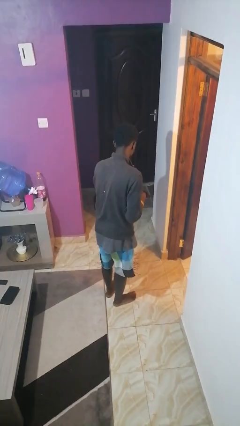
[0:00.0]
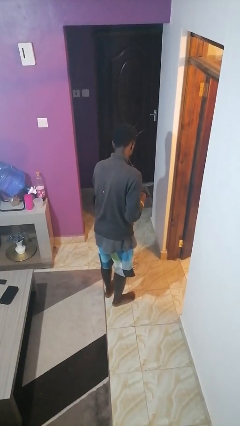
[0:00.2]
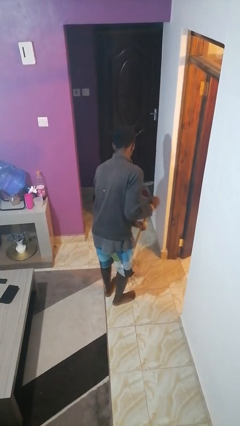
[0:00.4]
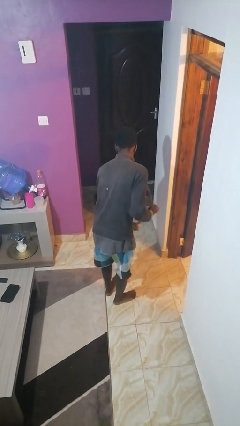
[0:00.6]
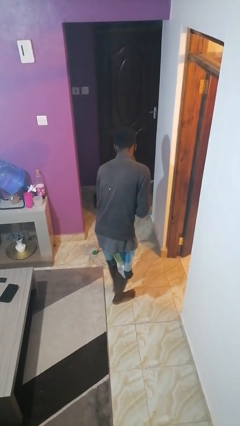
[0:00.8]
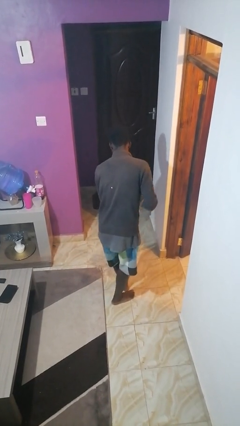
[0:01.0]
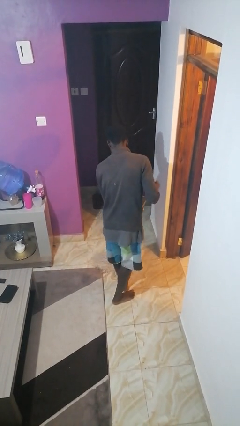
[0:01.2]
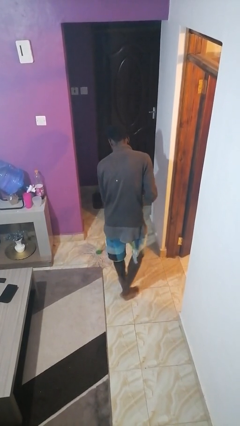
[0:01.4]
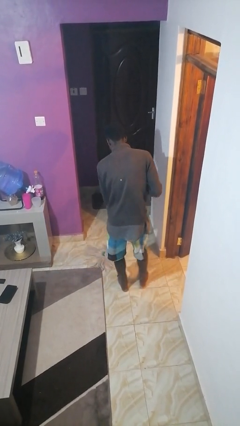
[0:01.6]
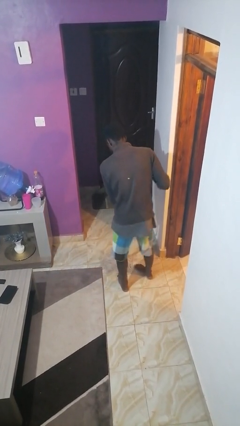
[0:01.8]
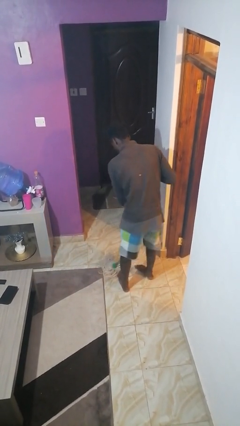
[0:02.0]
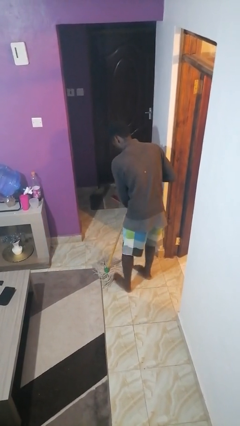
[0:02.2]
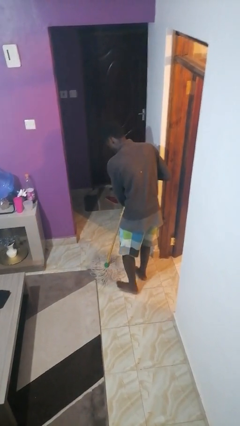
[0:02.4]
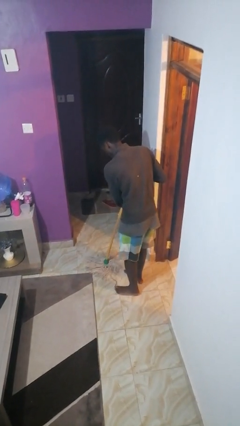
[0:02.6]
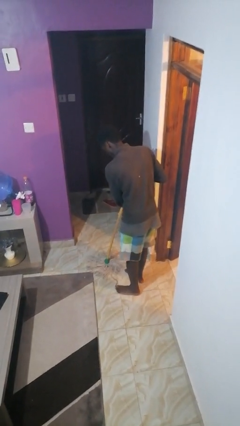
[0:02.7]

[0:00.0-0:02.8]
person mops

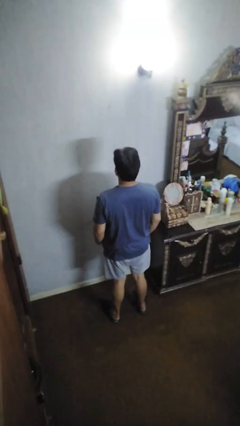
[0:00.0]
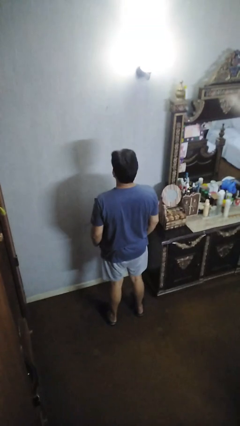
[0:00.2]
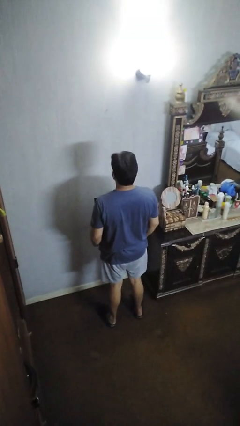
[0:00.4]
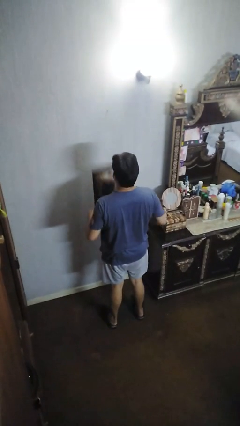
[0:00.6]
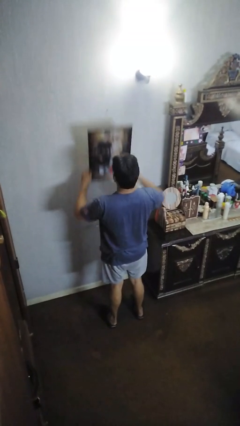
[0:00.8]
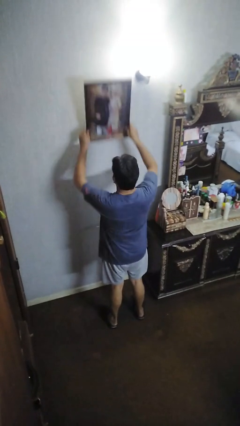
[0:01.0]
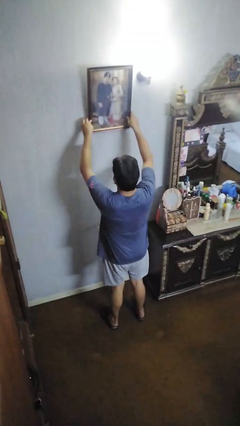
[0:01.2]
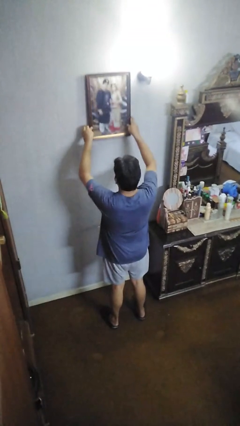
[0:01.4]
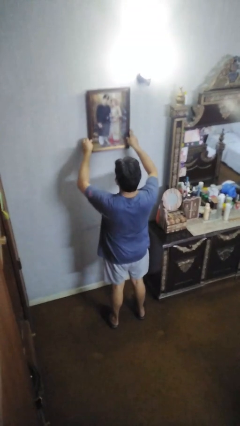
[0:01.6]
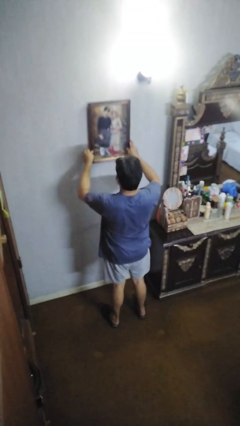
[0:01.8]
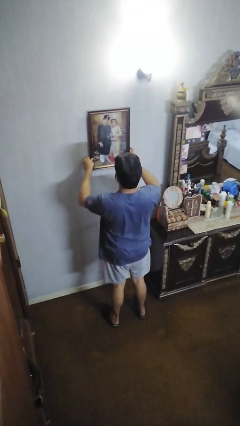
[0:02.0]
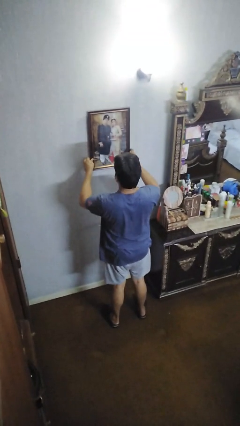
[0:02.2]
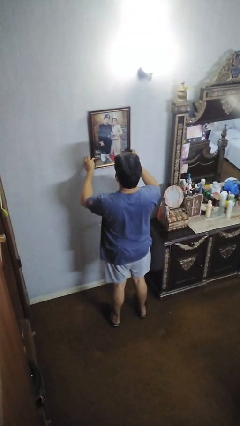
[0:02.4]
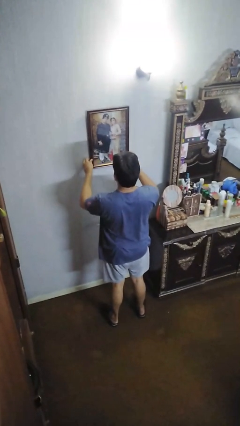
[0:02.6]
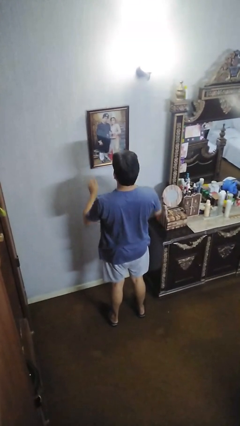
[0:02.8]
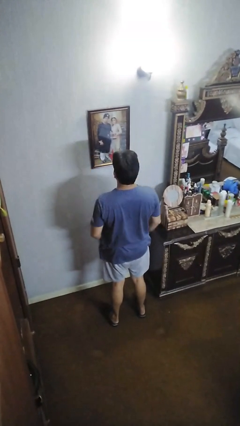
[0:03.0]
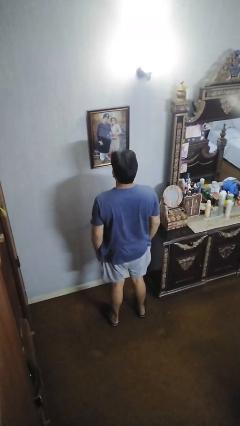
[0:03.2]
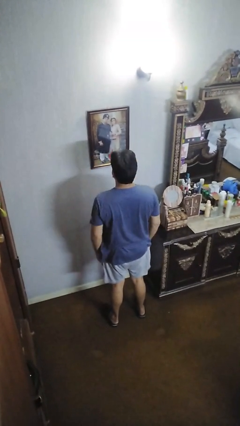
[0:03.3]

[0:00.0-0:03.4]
person puts up picture frame

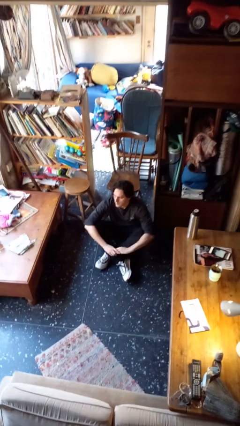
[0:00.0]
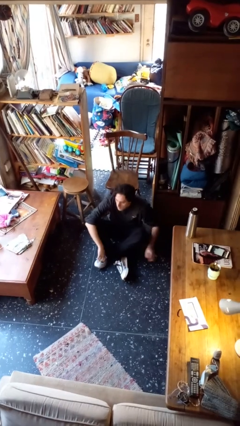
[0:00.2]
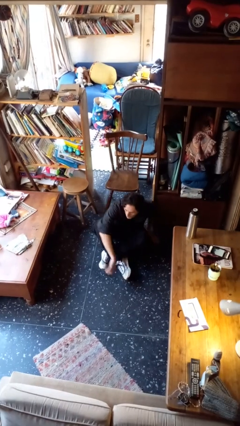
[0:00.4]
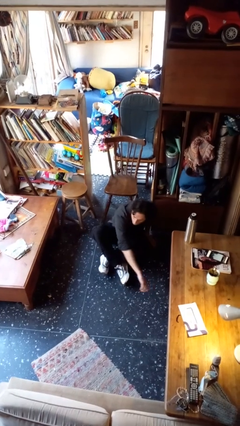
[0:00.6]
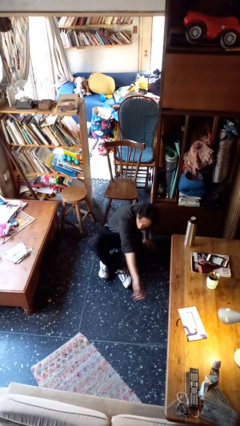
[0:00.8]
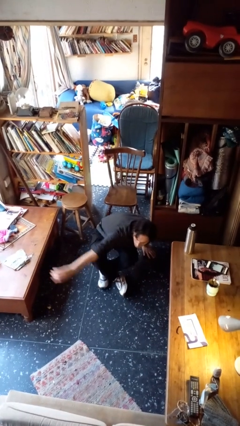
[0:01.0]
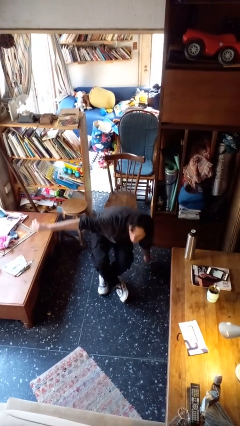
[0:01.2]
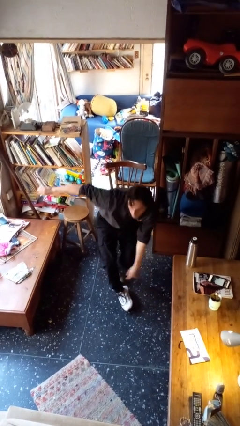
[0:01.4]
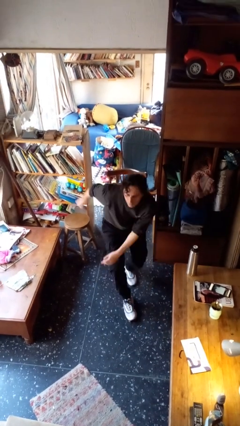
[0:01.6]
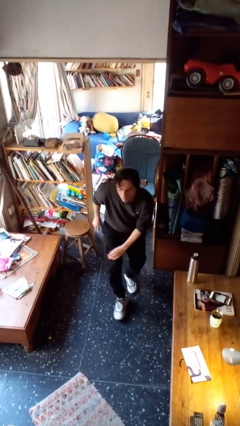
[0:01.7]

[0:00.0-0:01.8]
person stands up from floor

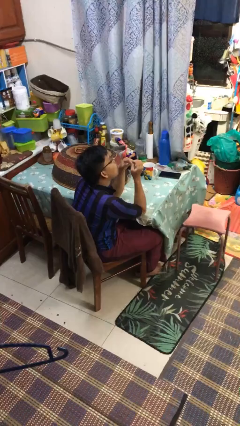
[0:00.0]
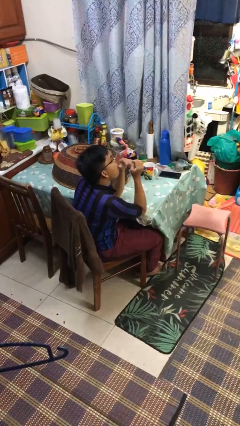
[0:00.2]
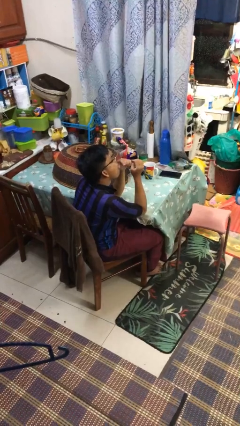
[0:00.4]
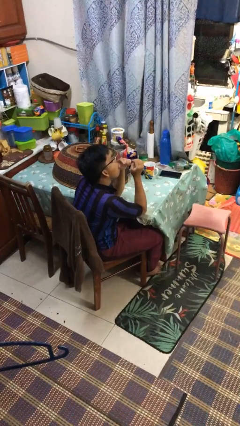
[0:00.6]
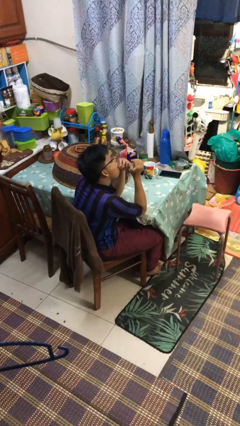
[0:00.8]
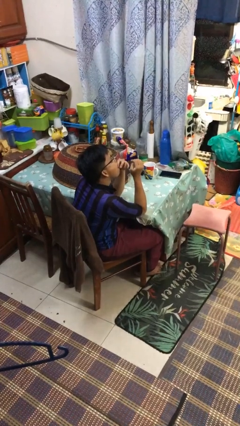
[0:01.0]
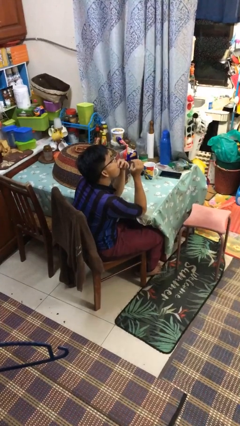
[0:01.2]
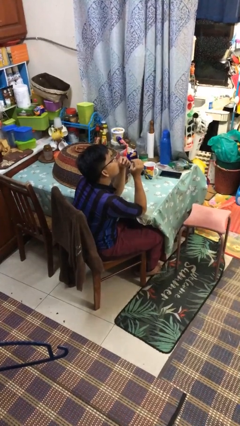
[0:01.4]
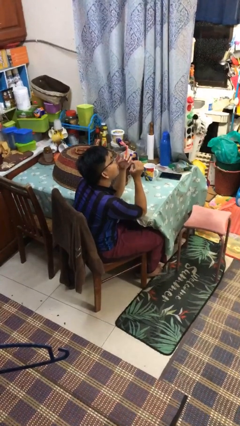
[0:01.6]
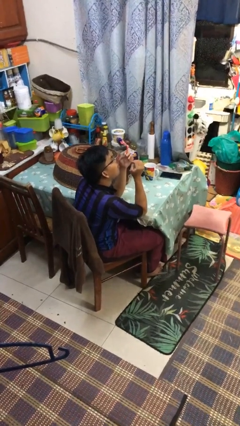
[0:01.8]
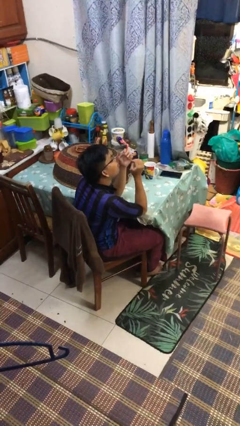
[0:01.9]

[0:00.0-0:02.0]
person licks fingers

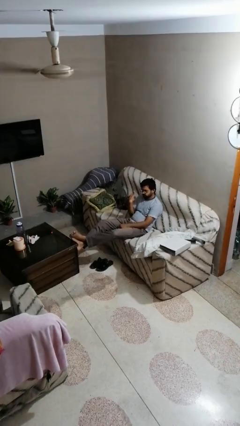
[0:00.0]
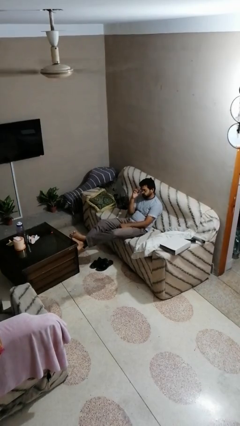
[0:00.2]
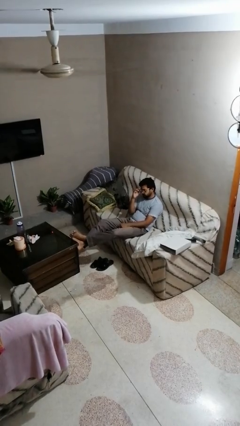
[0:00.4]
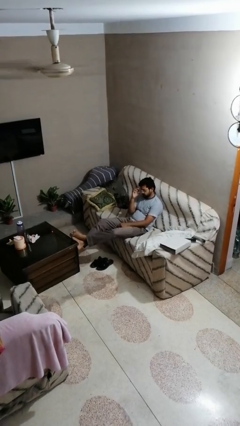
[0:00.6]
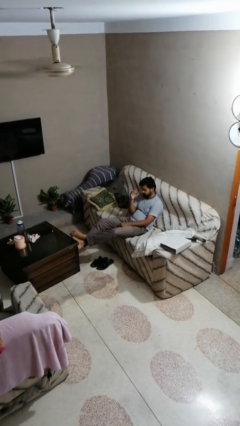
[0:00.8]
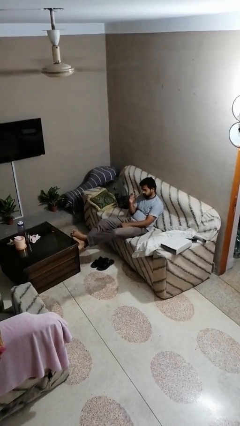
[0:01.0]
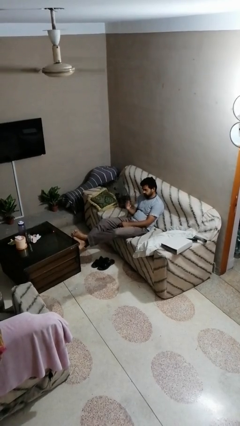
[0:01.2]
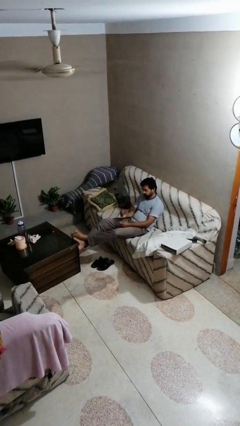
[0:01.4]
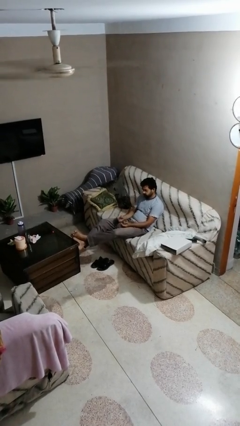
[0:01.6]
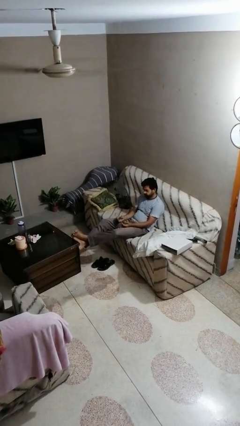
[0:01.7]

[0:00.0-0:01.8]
person takes off glasses

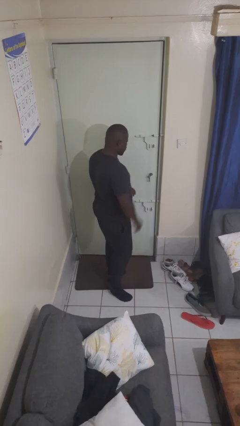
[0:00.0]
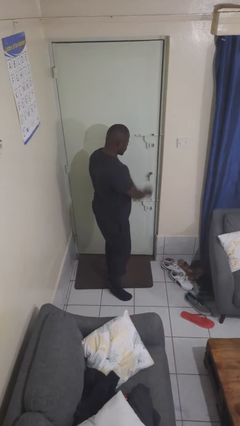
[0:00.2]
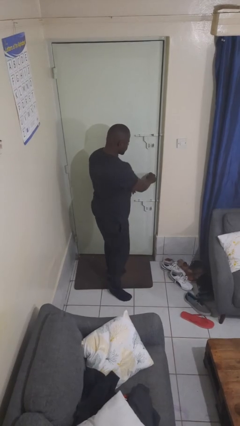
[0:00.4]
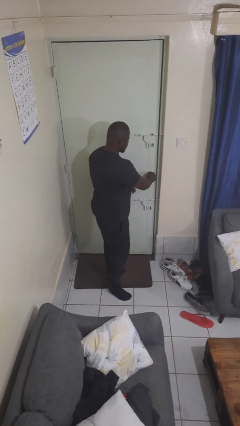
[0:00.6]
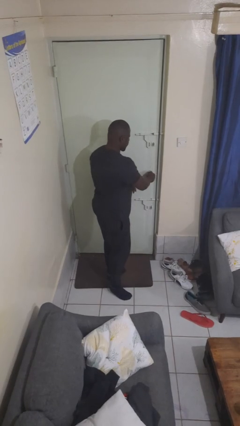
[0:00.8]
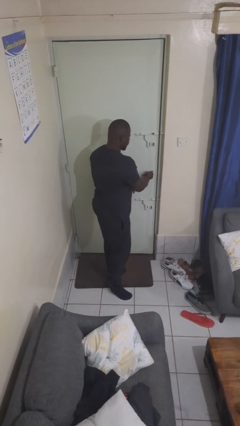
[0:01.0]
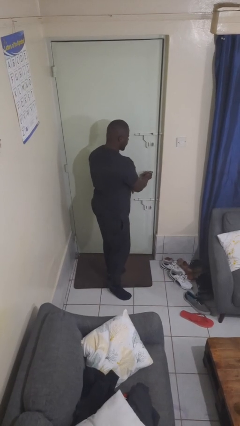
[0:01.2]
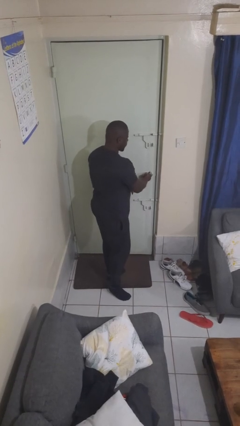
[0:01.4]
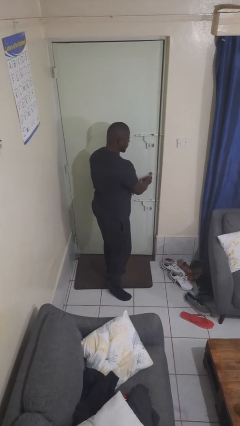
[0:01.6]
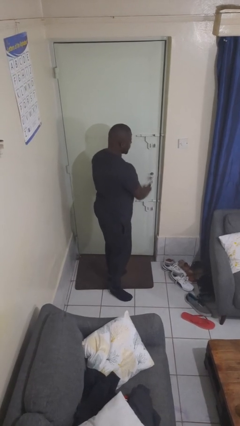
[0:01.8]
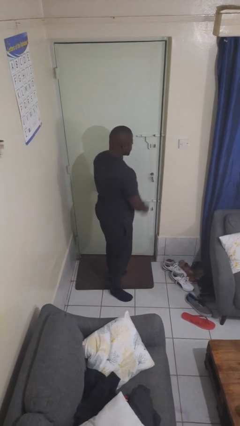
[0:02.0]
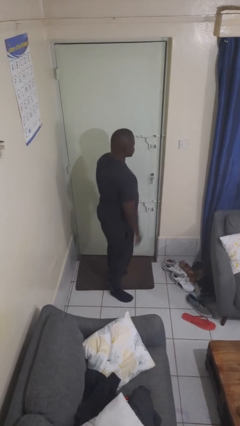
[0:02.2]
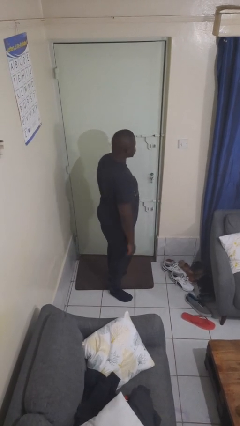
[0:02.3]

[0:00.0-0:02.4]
person locks door with keys

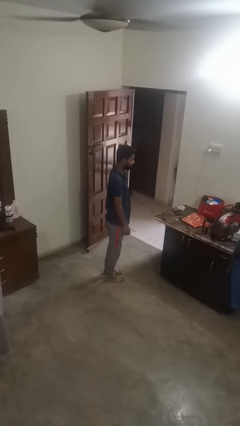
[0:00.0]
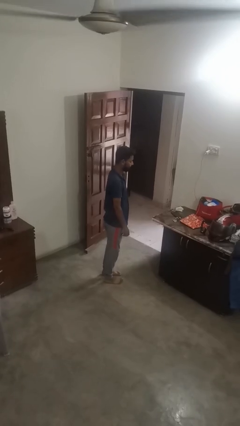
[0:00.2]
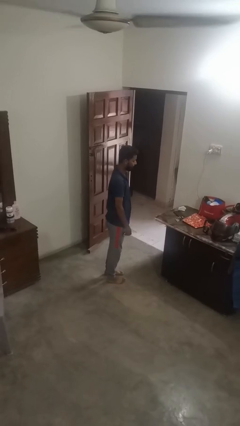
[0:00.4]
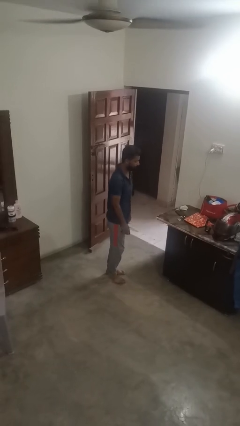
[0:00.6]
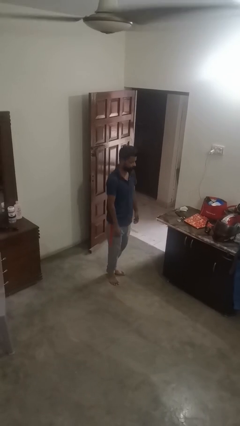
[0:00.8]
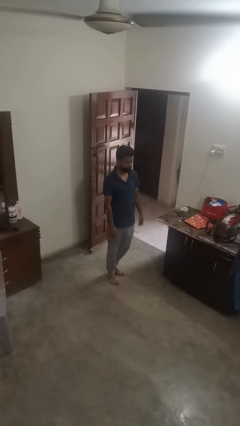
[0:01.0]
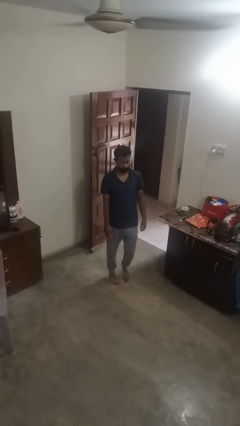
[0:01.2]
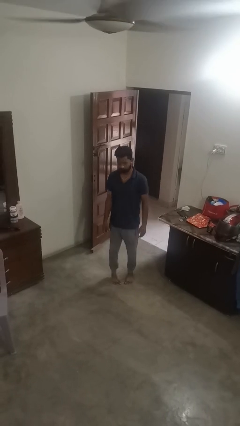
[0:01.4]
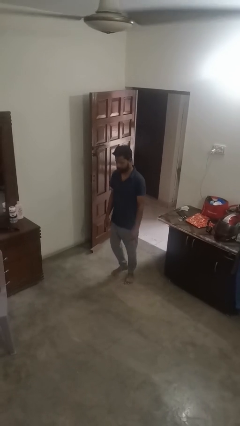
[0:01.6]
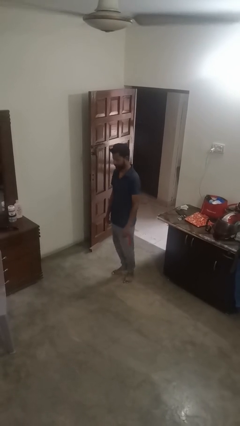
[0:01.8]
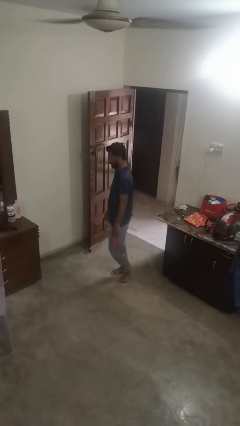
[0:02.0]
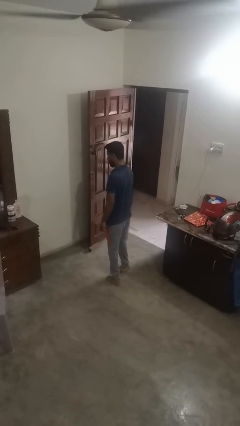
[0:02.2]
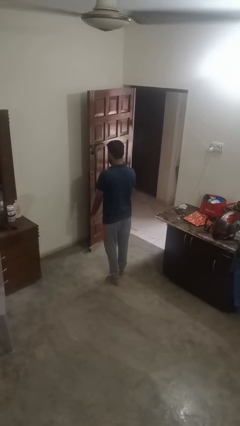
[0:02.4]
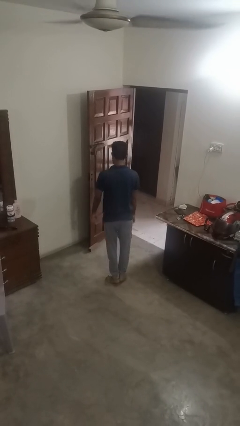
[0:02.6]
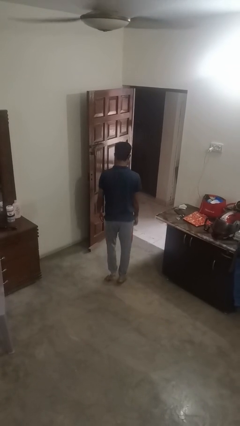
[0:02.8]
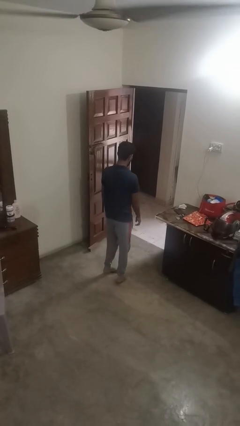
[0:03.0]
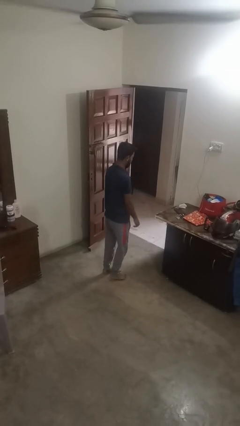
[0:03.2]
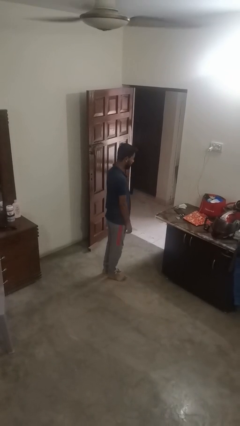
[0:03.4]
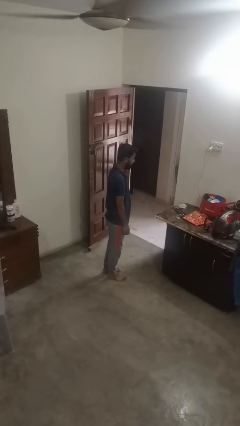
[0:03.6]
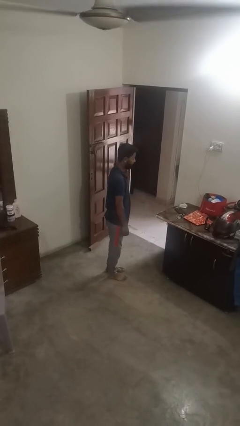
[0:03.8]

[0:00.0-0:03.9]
person twirls
